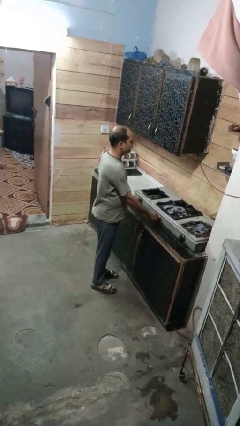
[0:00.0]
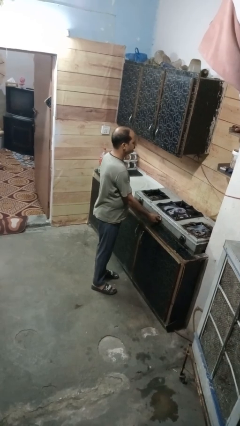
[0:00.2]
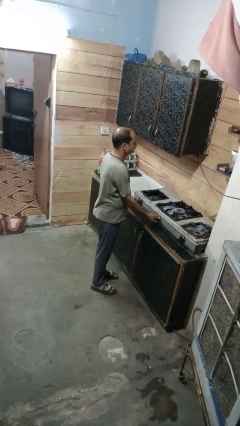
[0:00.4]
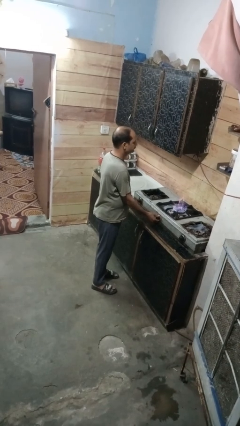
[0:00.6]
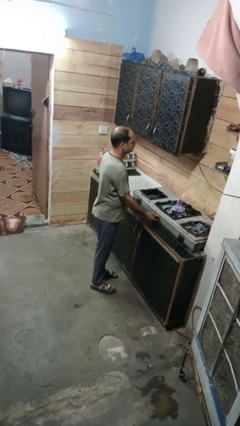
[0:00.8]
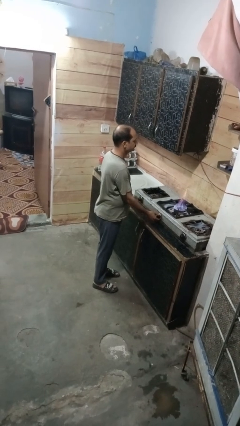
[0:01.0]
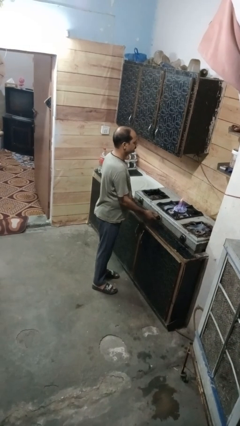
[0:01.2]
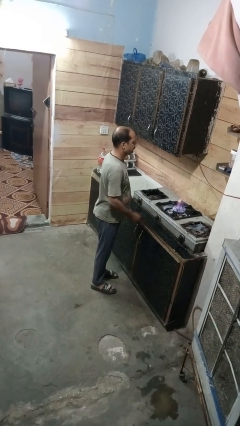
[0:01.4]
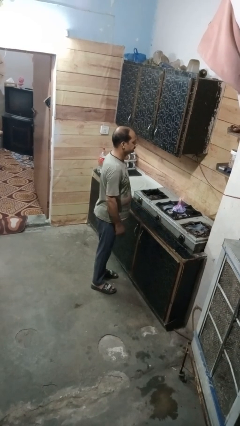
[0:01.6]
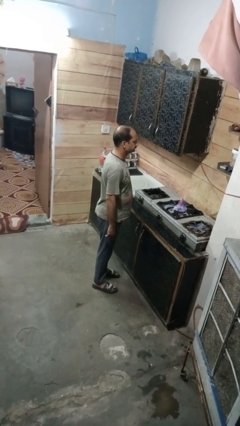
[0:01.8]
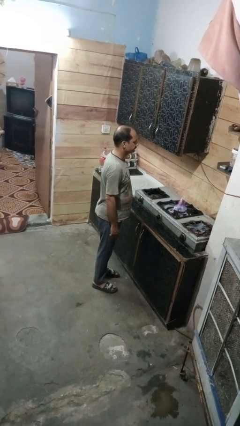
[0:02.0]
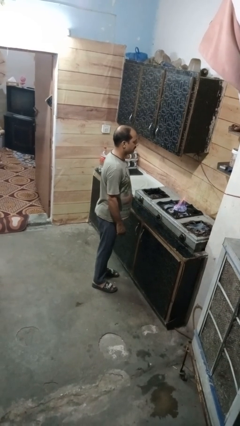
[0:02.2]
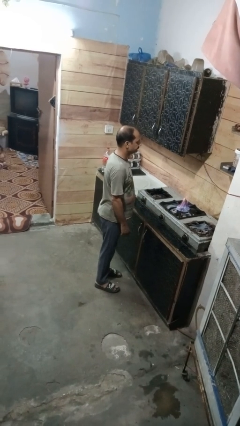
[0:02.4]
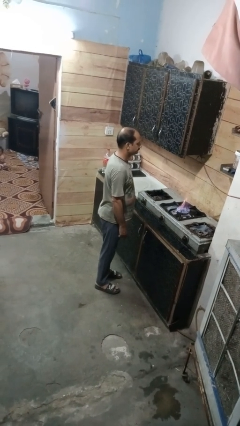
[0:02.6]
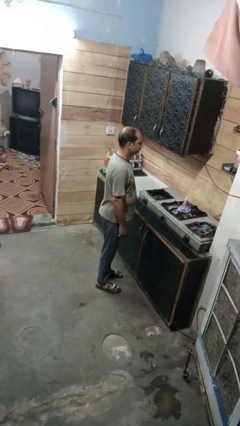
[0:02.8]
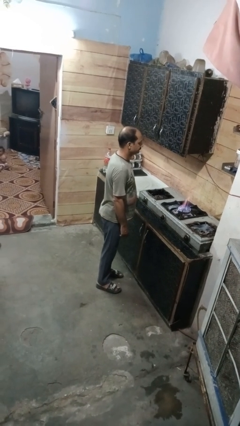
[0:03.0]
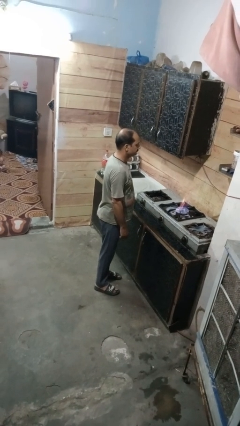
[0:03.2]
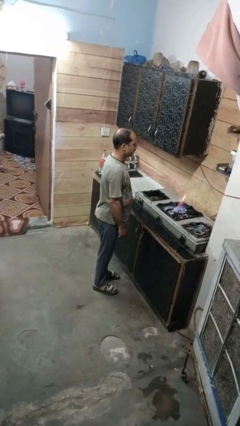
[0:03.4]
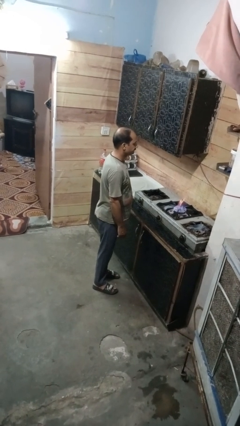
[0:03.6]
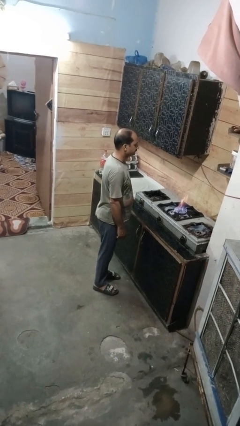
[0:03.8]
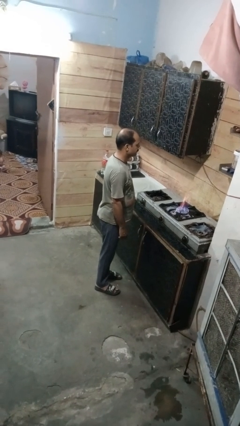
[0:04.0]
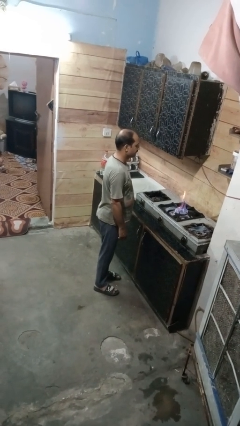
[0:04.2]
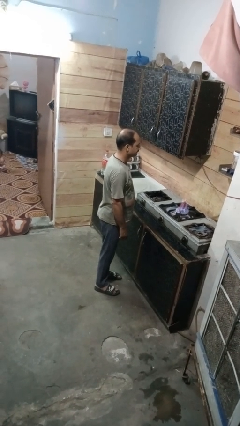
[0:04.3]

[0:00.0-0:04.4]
person turns on stovetop

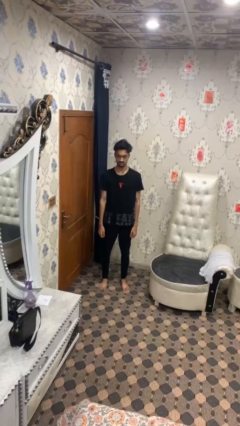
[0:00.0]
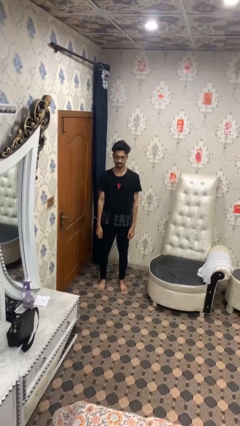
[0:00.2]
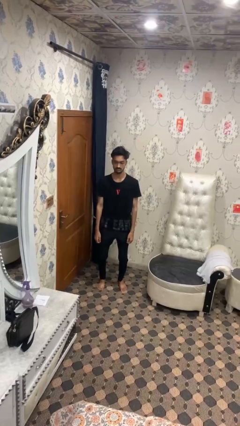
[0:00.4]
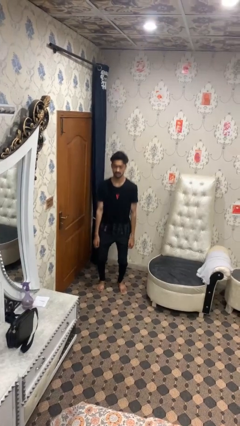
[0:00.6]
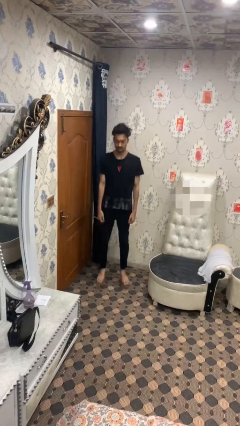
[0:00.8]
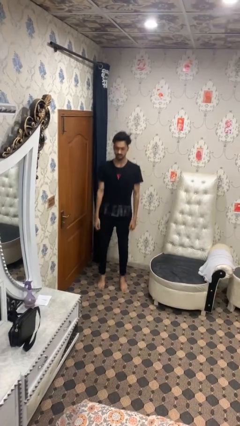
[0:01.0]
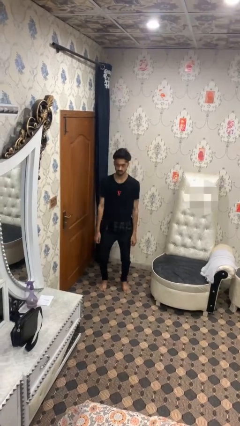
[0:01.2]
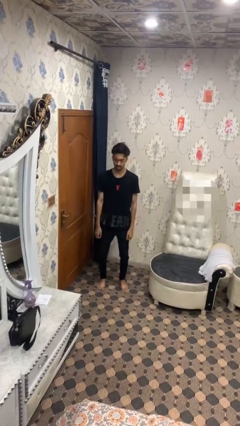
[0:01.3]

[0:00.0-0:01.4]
person jumps

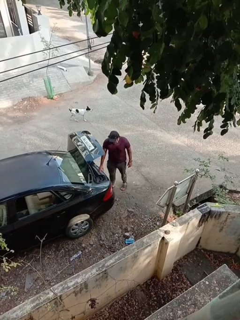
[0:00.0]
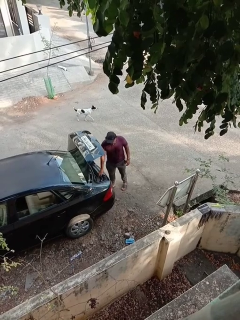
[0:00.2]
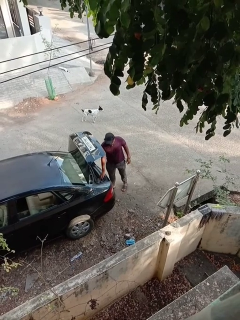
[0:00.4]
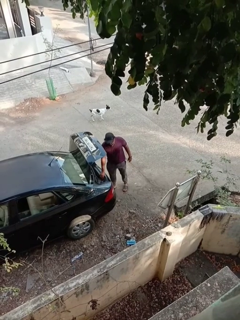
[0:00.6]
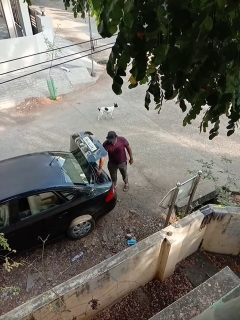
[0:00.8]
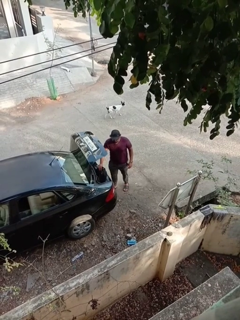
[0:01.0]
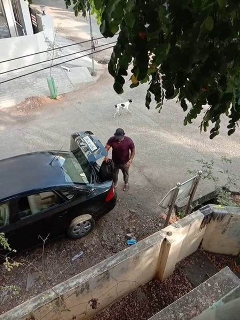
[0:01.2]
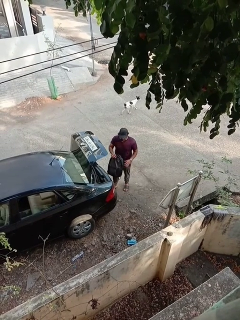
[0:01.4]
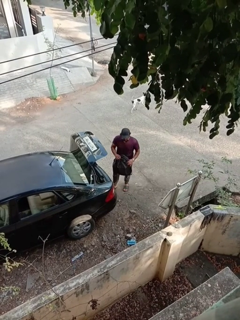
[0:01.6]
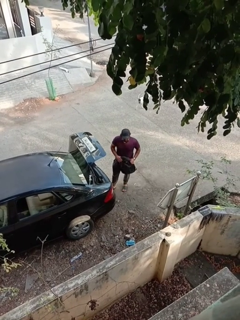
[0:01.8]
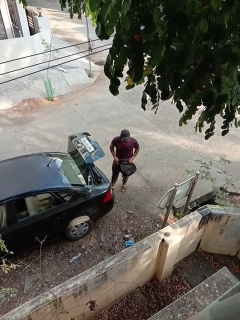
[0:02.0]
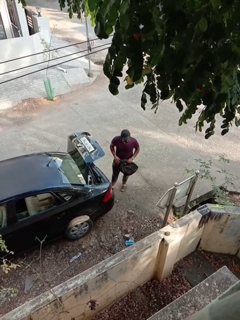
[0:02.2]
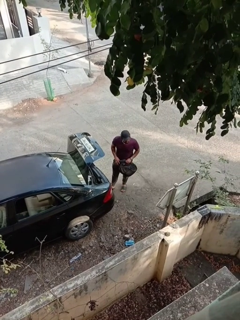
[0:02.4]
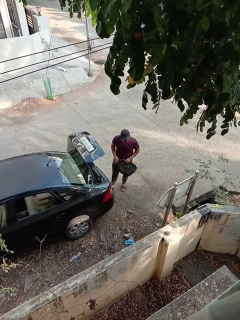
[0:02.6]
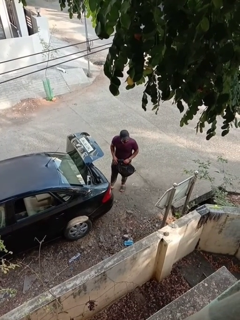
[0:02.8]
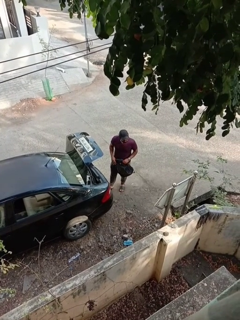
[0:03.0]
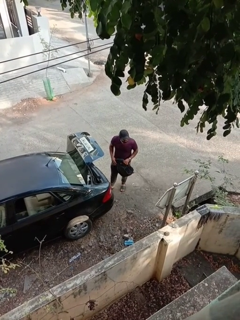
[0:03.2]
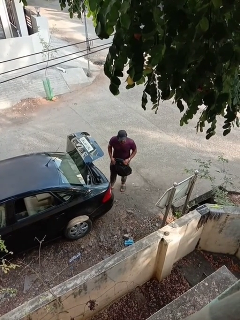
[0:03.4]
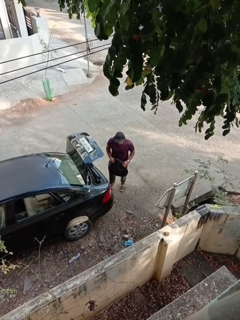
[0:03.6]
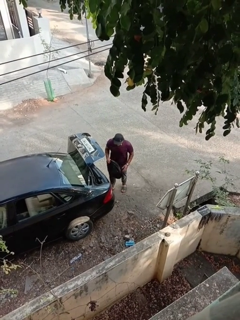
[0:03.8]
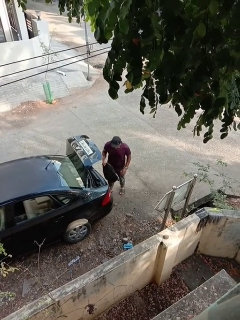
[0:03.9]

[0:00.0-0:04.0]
person unloads car

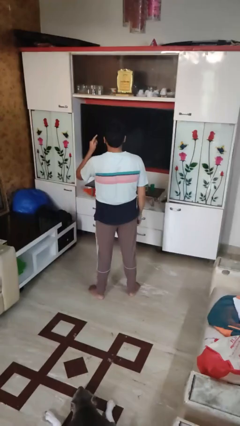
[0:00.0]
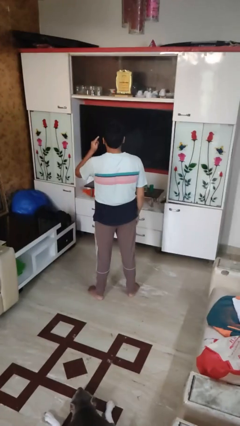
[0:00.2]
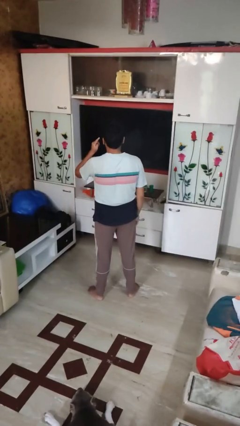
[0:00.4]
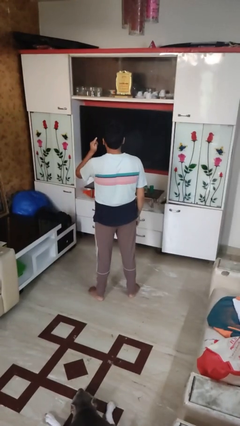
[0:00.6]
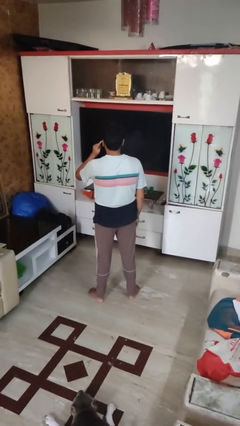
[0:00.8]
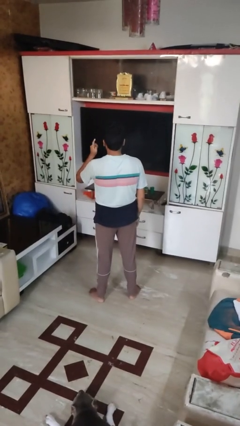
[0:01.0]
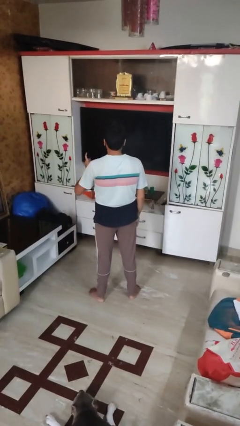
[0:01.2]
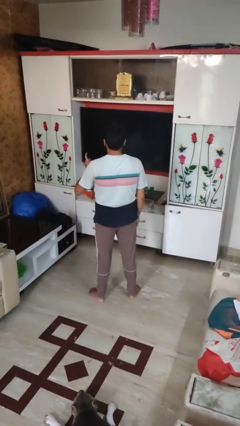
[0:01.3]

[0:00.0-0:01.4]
person gestures listen closely

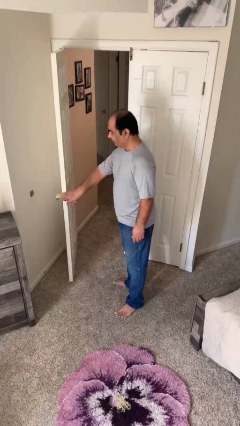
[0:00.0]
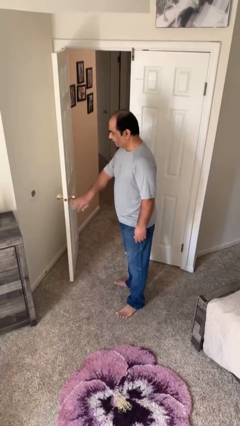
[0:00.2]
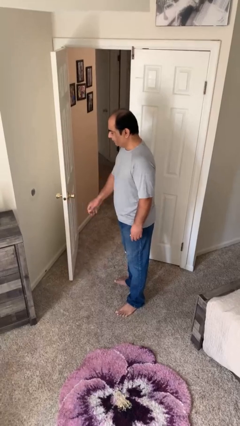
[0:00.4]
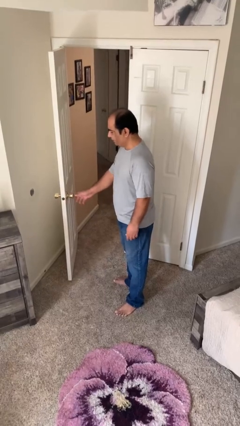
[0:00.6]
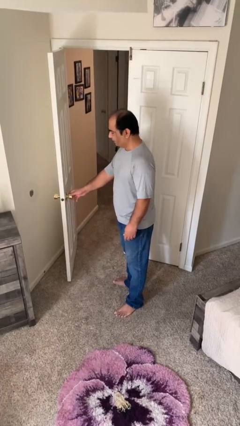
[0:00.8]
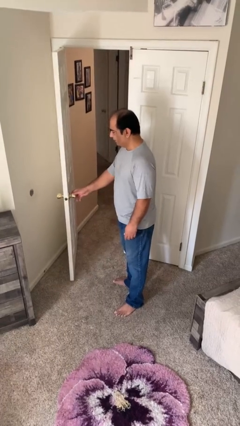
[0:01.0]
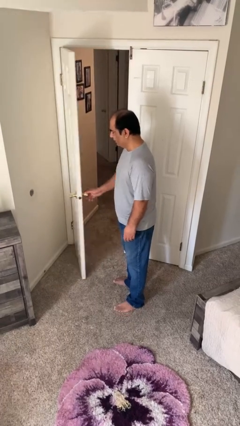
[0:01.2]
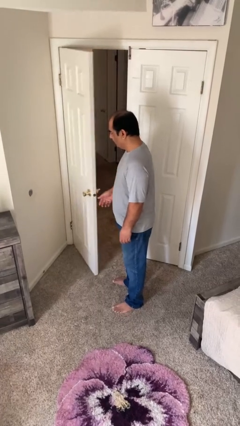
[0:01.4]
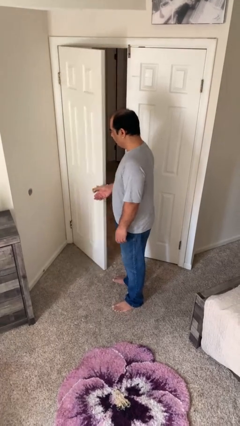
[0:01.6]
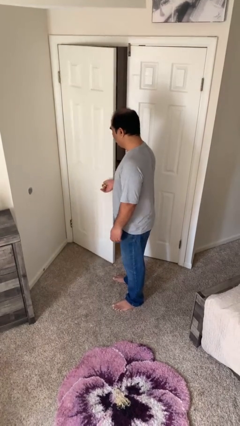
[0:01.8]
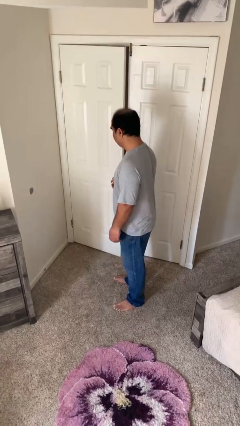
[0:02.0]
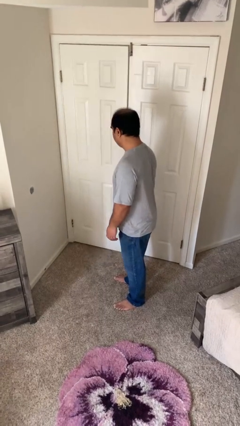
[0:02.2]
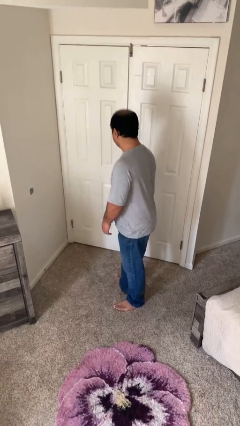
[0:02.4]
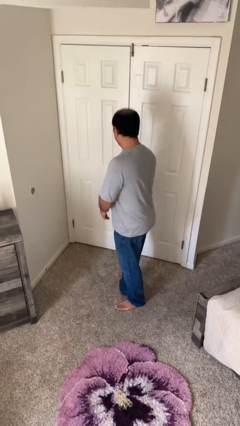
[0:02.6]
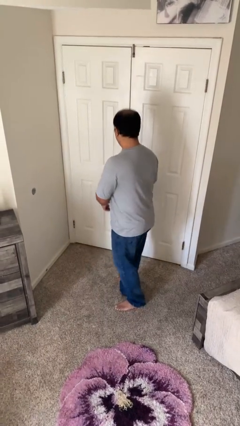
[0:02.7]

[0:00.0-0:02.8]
person closes facility door

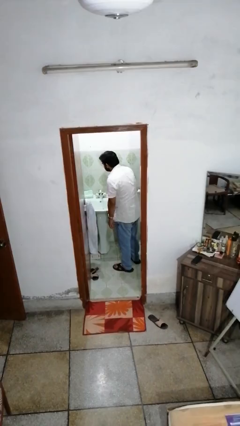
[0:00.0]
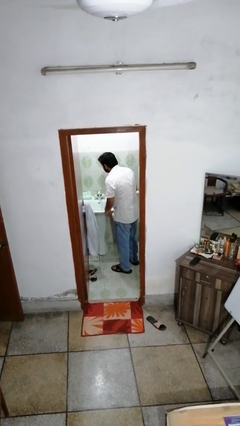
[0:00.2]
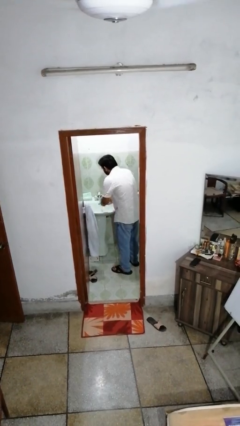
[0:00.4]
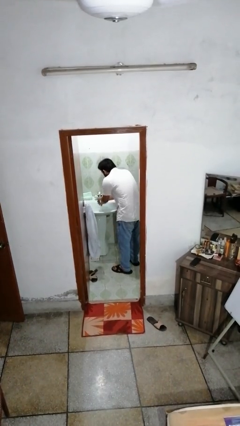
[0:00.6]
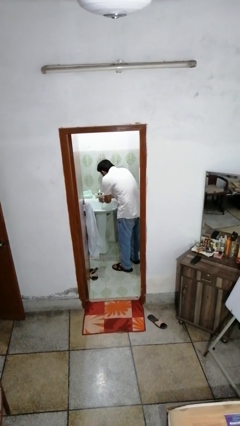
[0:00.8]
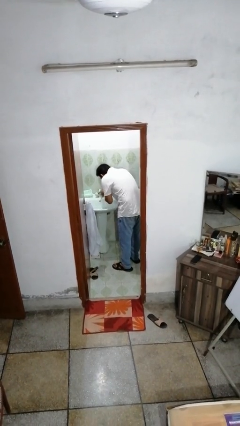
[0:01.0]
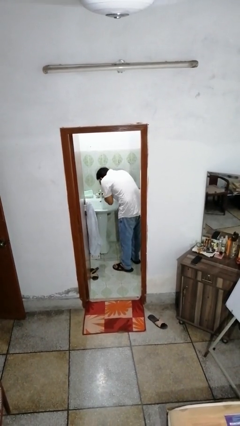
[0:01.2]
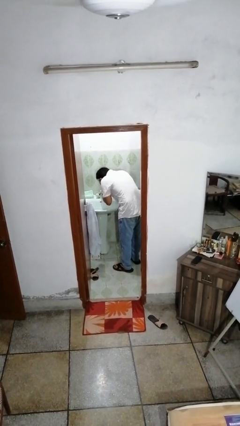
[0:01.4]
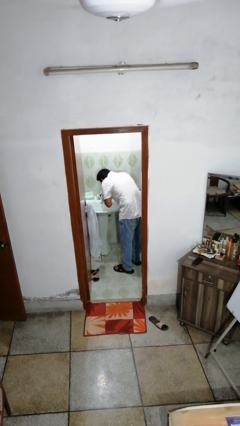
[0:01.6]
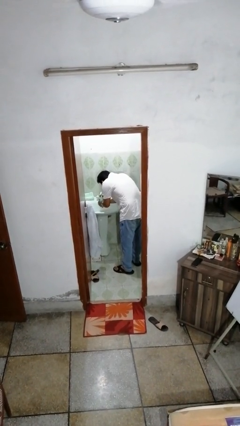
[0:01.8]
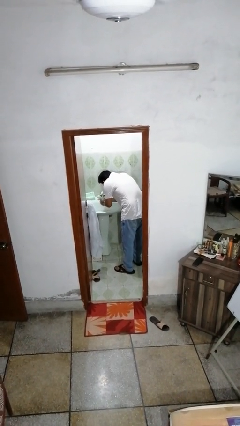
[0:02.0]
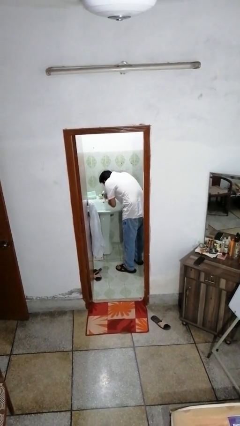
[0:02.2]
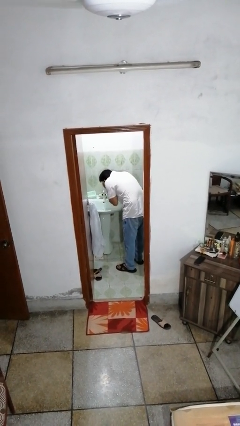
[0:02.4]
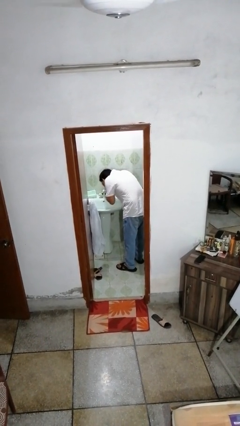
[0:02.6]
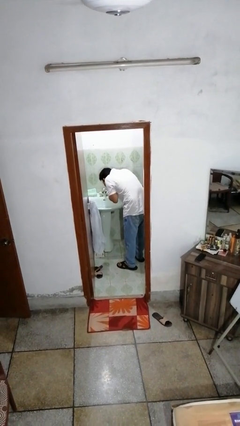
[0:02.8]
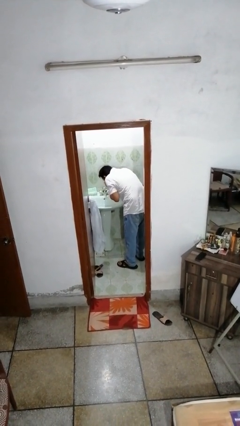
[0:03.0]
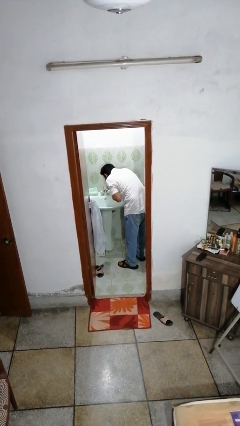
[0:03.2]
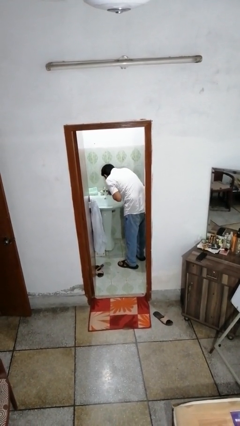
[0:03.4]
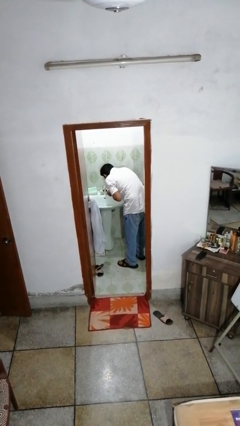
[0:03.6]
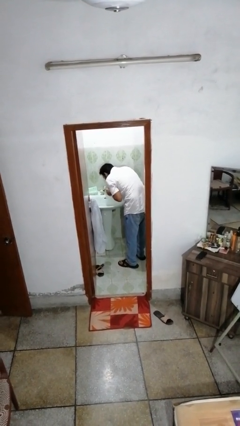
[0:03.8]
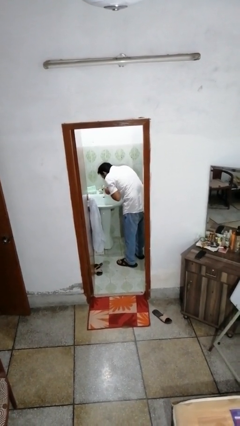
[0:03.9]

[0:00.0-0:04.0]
person washes face

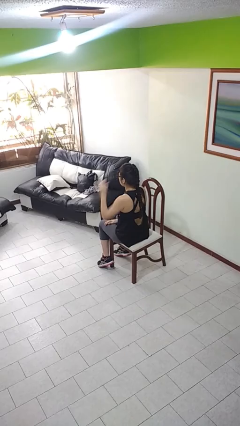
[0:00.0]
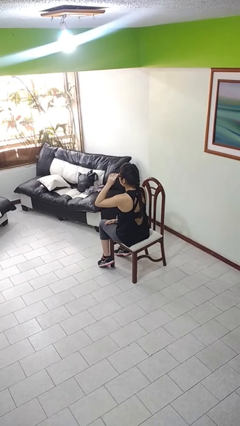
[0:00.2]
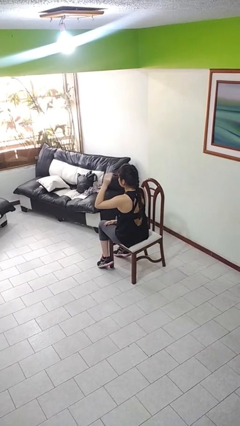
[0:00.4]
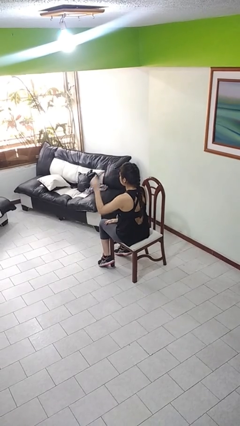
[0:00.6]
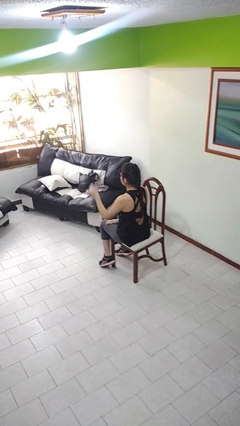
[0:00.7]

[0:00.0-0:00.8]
person takes off glasses
